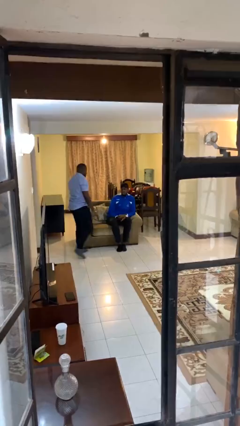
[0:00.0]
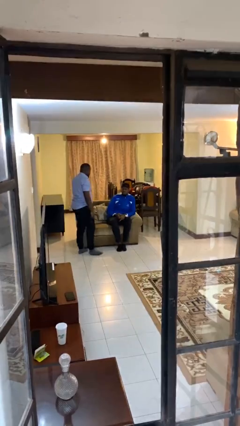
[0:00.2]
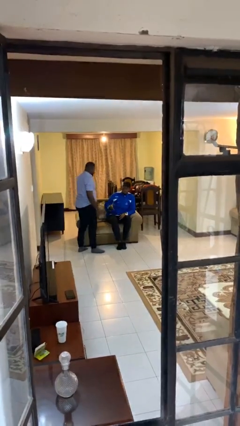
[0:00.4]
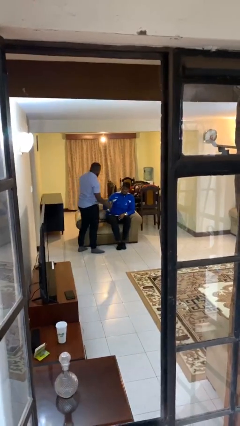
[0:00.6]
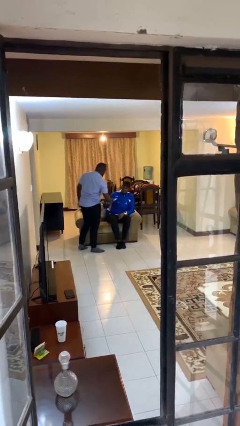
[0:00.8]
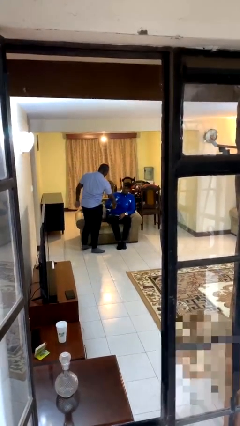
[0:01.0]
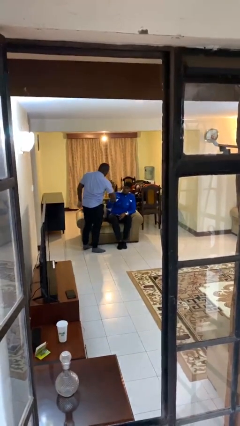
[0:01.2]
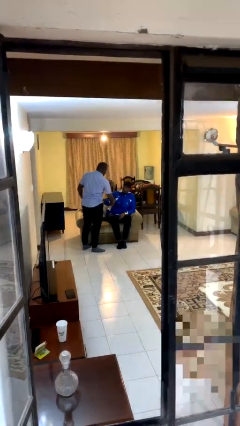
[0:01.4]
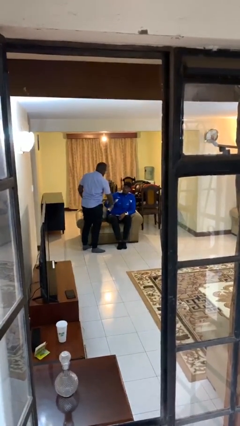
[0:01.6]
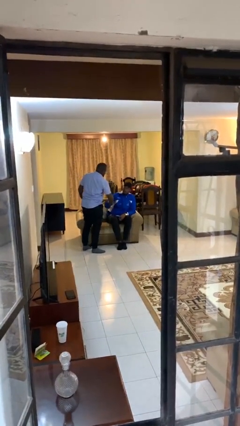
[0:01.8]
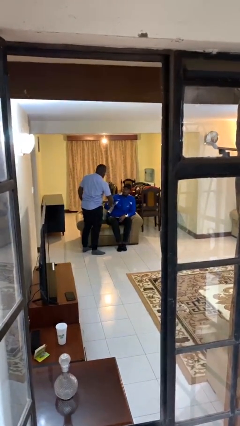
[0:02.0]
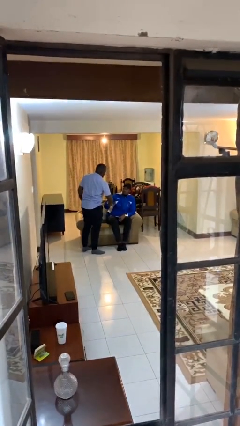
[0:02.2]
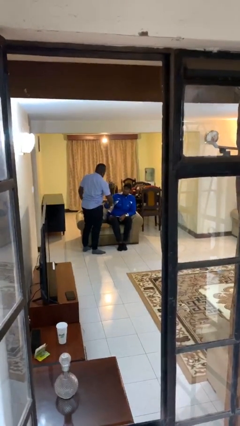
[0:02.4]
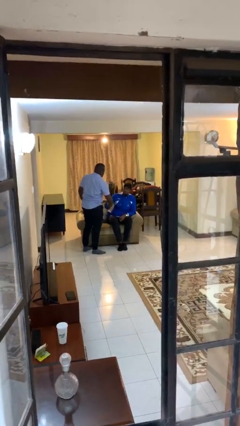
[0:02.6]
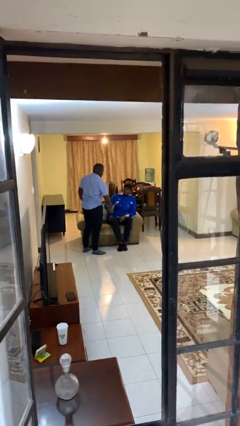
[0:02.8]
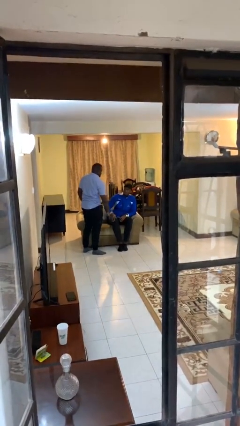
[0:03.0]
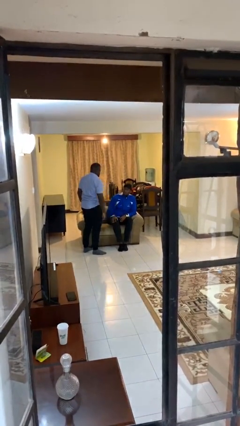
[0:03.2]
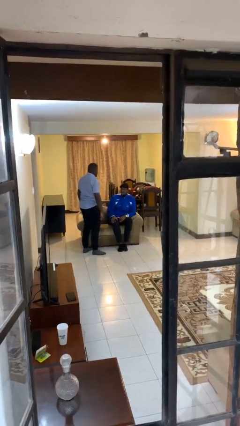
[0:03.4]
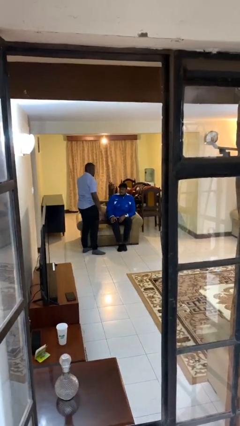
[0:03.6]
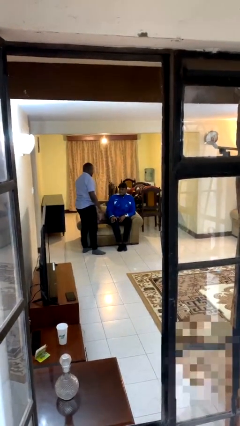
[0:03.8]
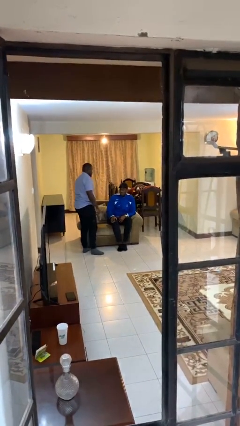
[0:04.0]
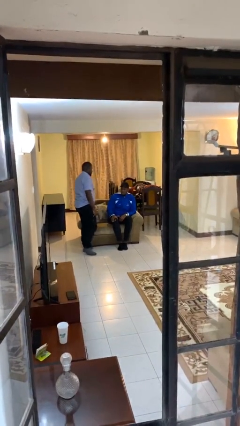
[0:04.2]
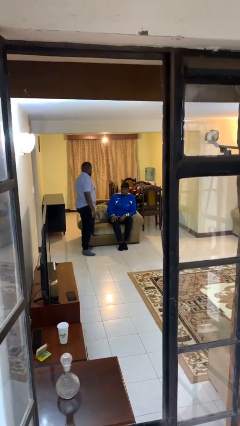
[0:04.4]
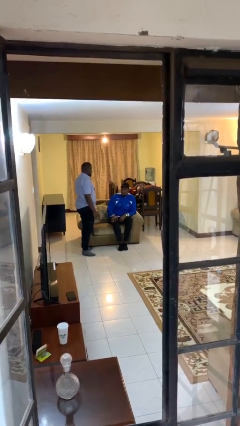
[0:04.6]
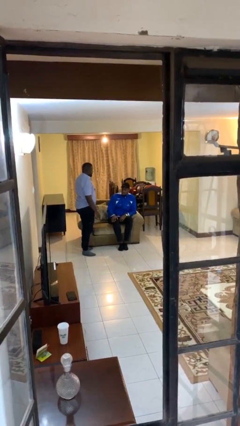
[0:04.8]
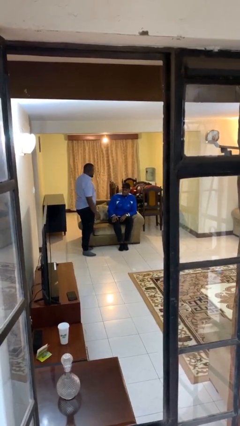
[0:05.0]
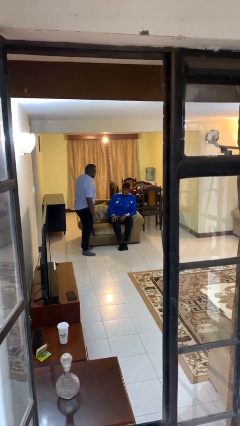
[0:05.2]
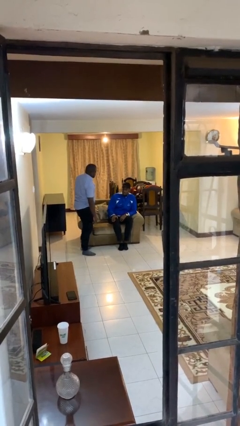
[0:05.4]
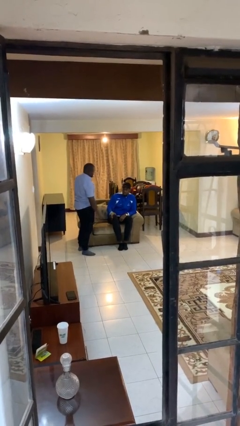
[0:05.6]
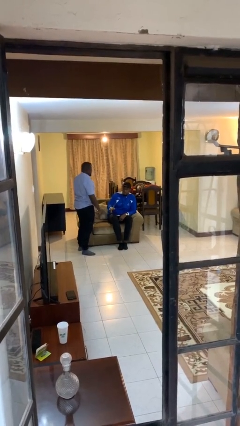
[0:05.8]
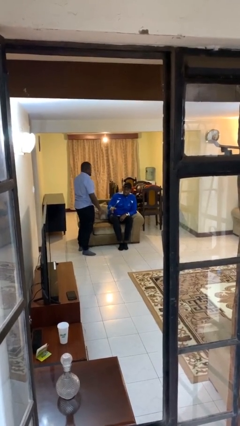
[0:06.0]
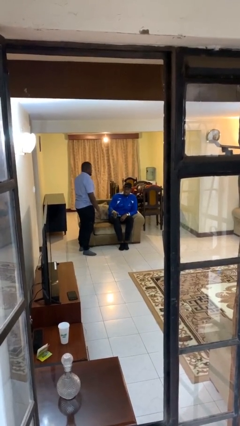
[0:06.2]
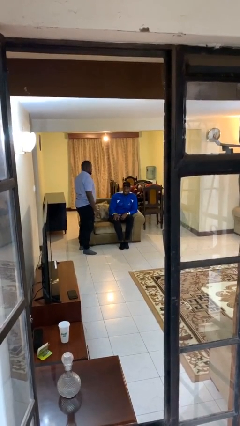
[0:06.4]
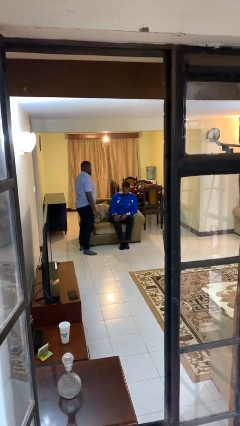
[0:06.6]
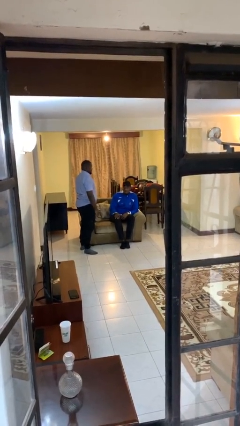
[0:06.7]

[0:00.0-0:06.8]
person shakes hand

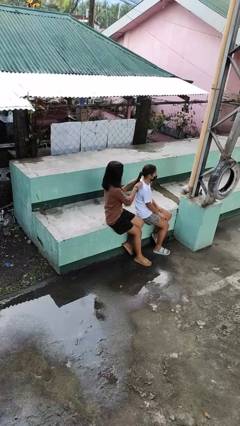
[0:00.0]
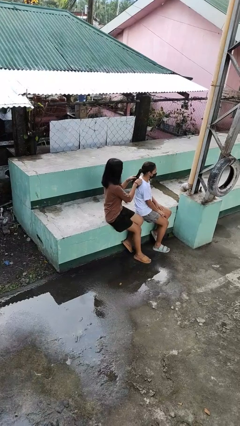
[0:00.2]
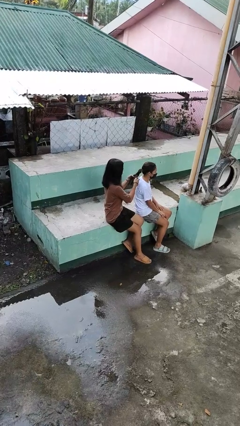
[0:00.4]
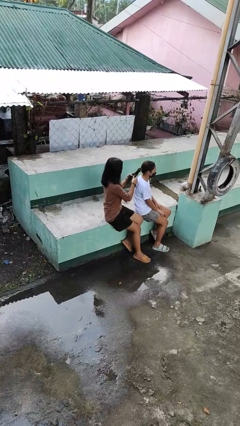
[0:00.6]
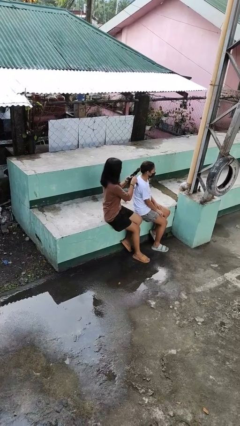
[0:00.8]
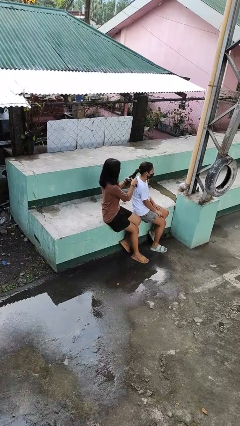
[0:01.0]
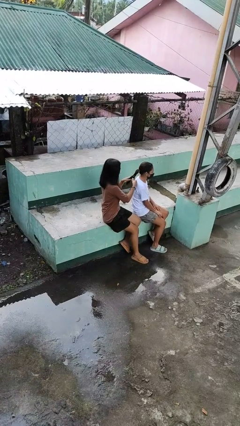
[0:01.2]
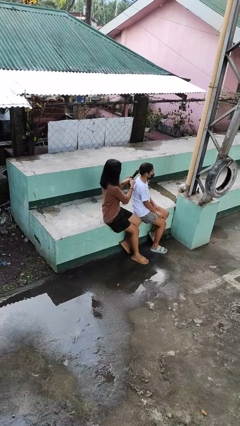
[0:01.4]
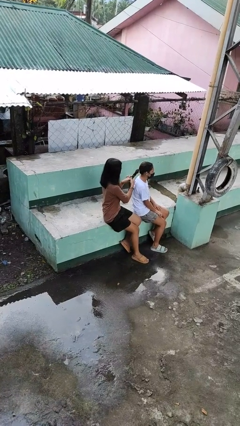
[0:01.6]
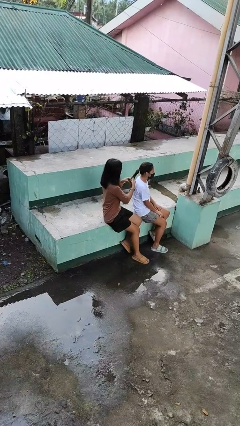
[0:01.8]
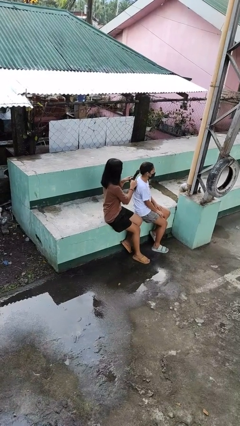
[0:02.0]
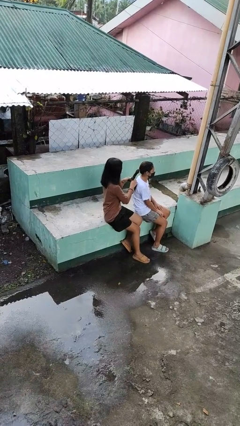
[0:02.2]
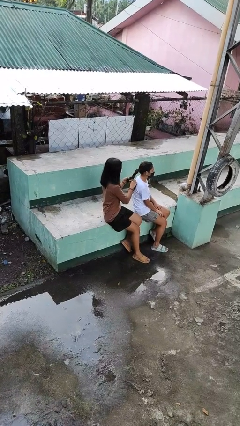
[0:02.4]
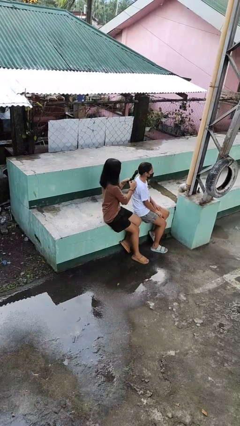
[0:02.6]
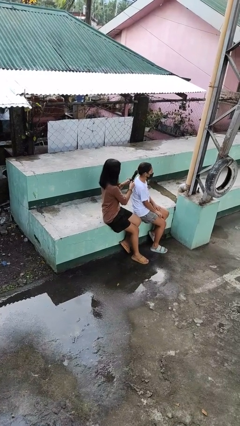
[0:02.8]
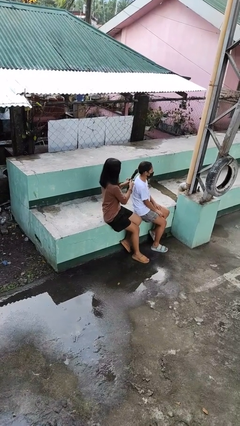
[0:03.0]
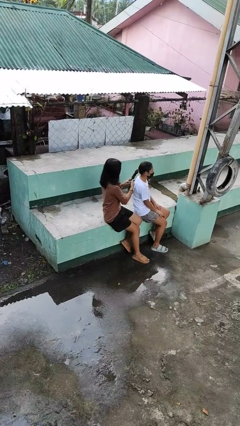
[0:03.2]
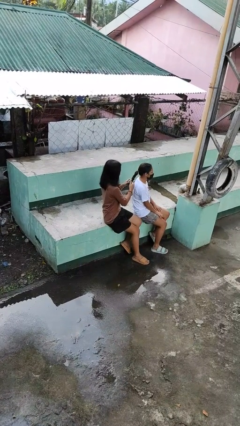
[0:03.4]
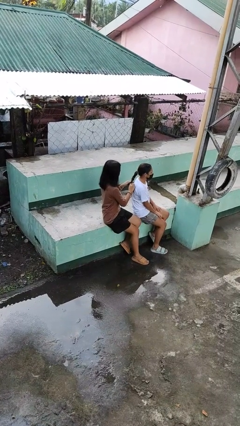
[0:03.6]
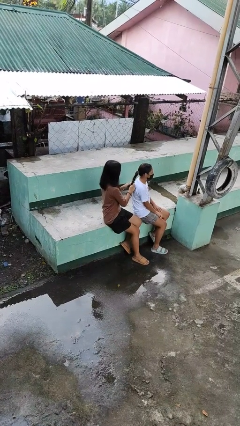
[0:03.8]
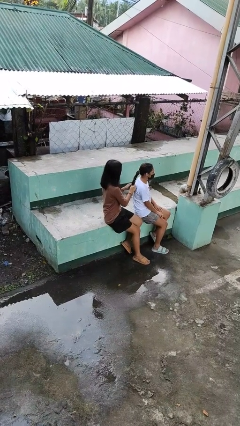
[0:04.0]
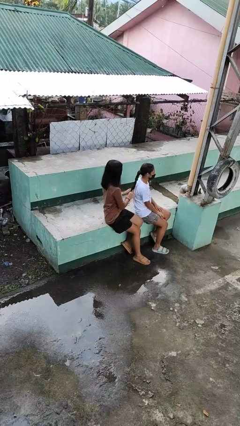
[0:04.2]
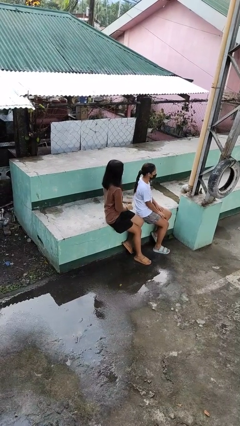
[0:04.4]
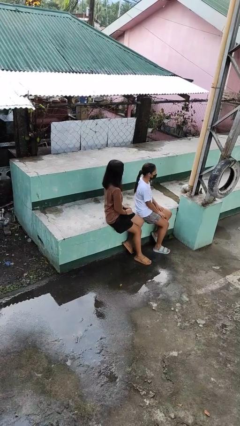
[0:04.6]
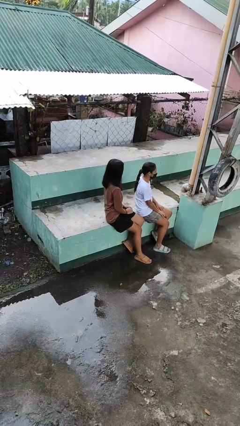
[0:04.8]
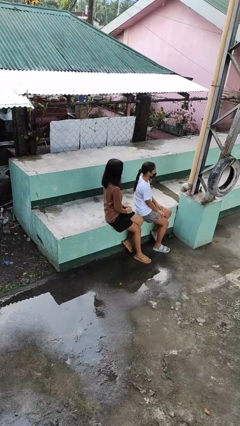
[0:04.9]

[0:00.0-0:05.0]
person braids hair of person

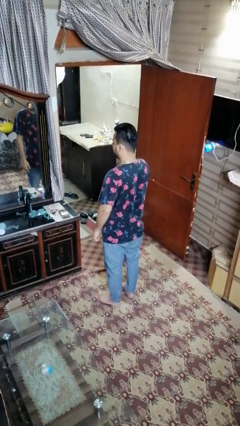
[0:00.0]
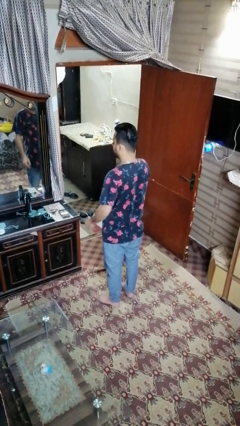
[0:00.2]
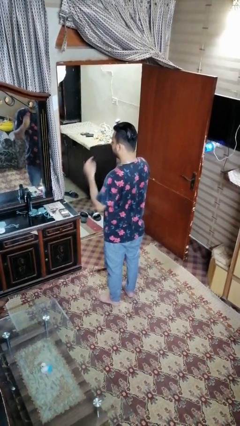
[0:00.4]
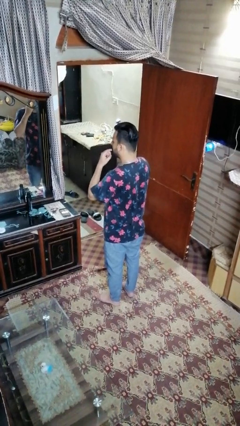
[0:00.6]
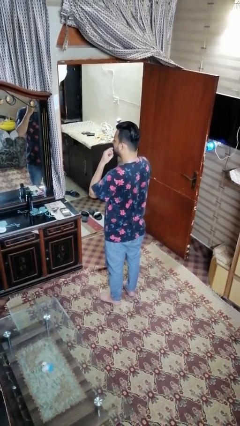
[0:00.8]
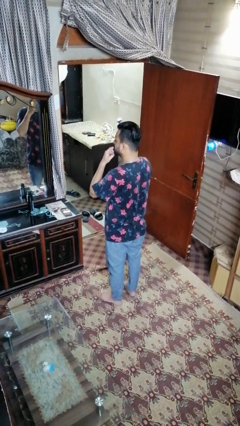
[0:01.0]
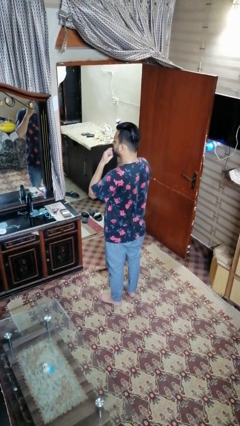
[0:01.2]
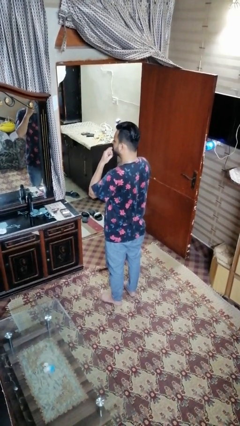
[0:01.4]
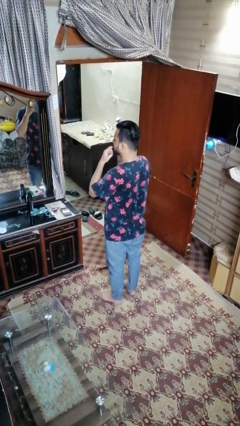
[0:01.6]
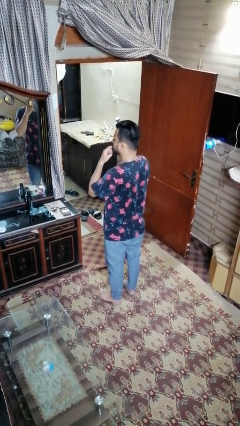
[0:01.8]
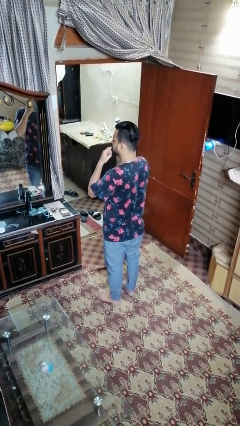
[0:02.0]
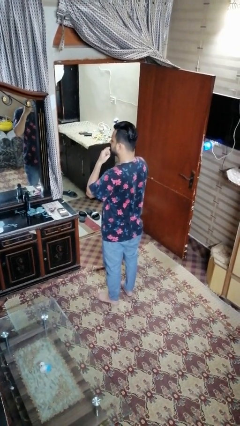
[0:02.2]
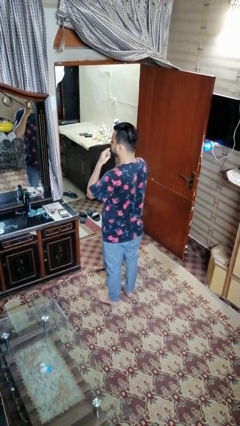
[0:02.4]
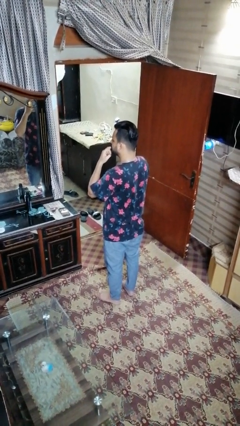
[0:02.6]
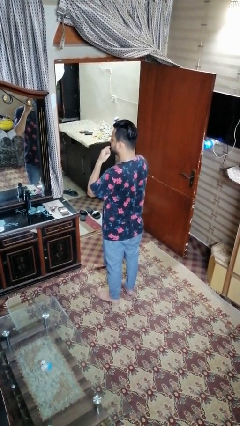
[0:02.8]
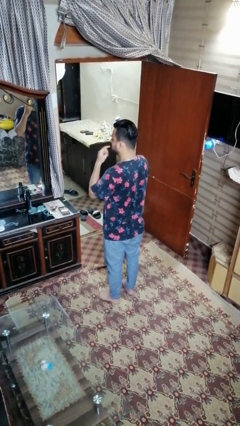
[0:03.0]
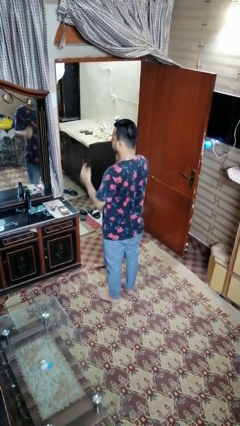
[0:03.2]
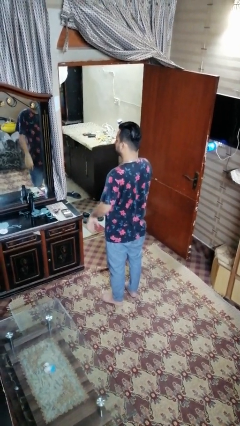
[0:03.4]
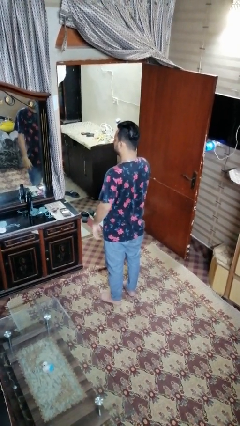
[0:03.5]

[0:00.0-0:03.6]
person licks fingers

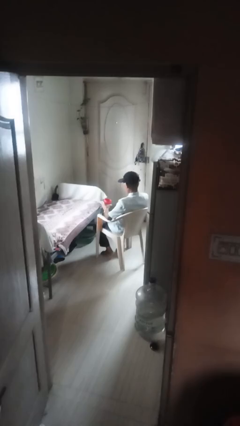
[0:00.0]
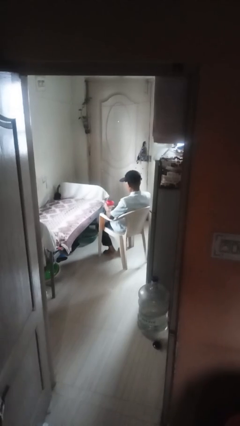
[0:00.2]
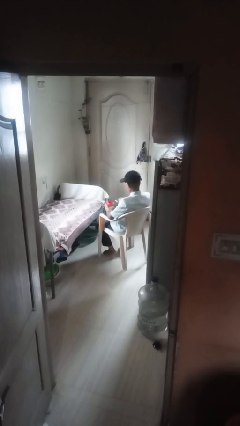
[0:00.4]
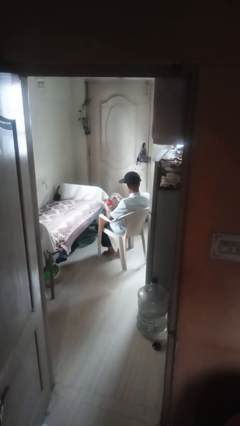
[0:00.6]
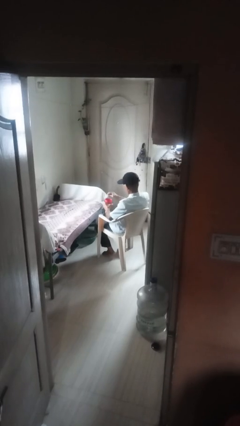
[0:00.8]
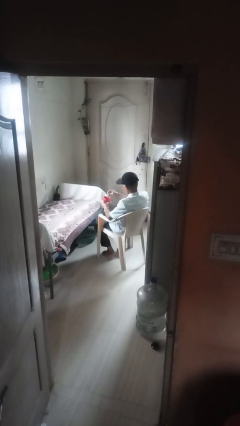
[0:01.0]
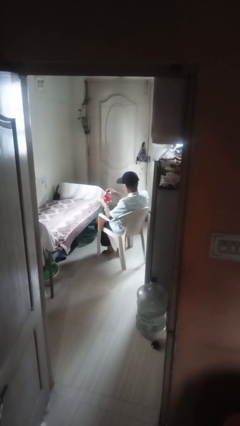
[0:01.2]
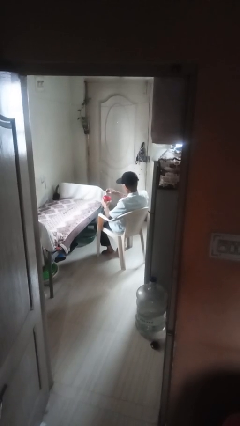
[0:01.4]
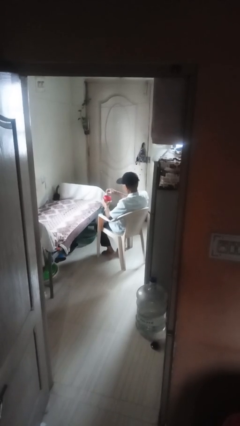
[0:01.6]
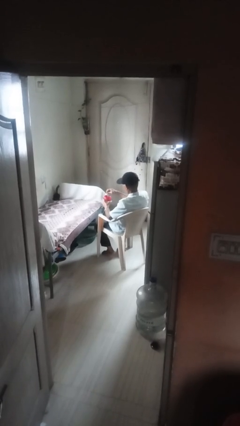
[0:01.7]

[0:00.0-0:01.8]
person stirs mug

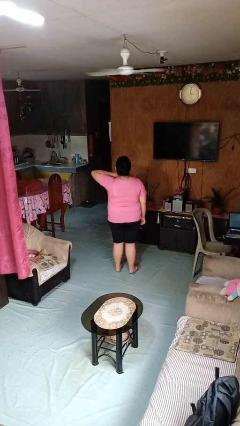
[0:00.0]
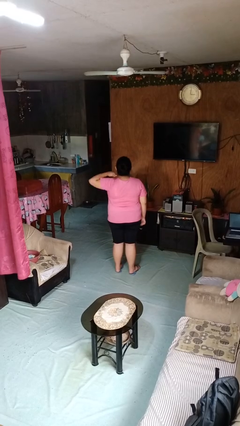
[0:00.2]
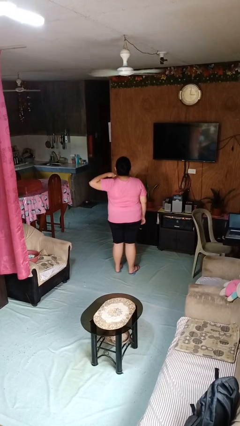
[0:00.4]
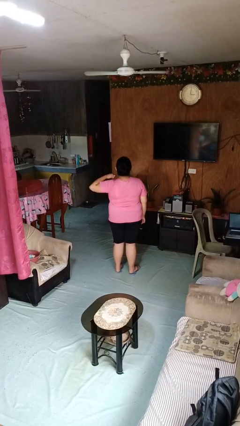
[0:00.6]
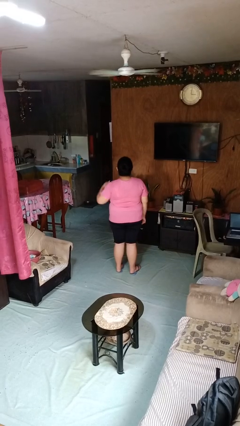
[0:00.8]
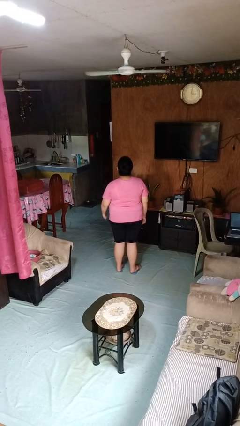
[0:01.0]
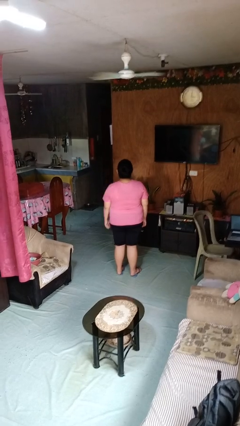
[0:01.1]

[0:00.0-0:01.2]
person gestures cut
